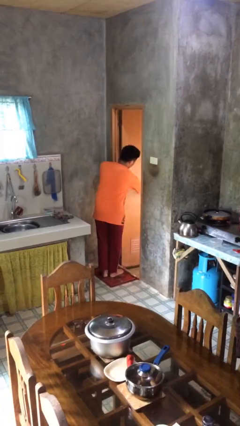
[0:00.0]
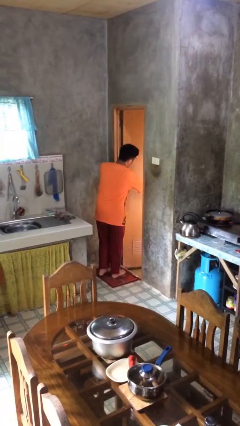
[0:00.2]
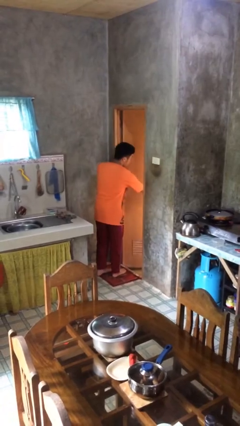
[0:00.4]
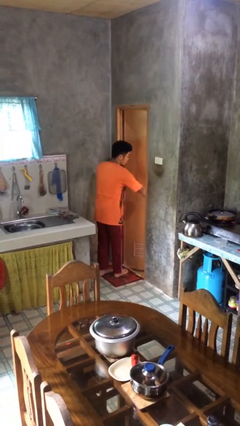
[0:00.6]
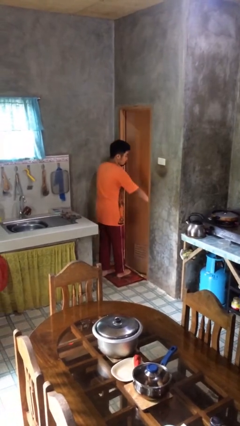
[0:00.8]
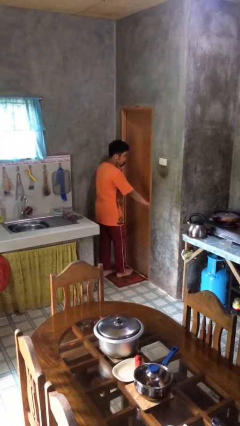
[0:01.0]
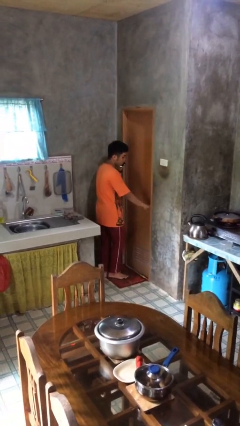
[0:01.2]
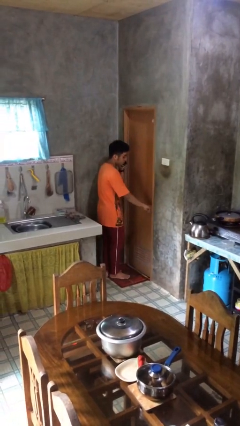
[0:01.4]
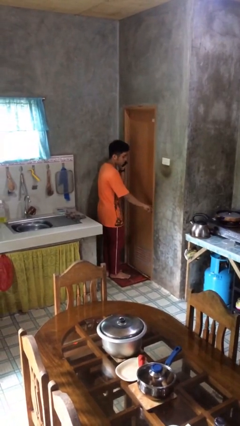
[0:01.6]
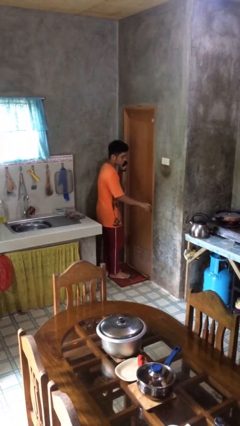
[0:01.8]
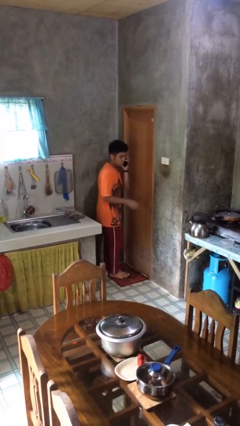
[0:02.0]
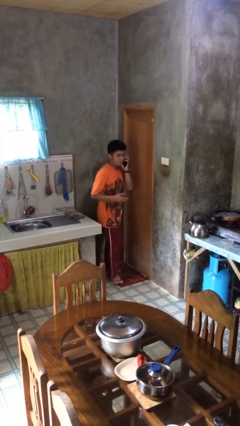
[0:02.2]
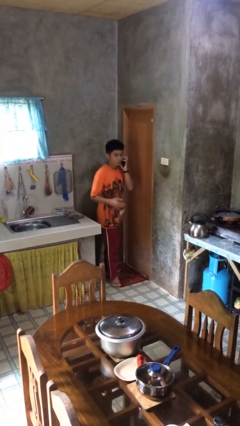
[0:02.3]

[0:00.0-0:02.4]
person closes facility door

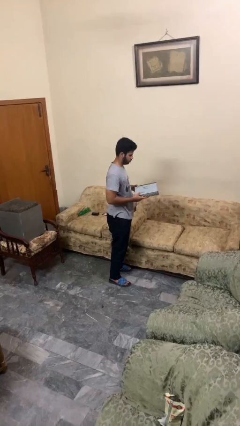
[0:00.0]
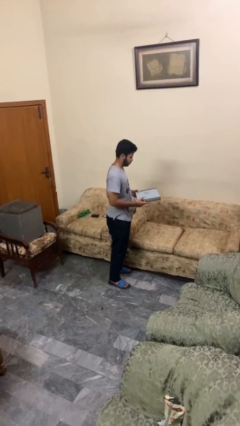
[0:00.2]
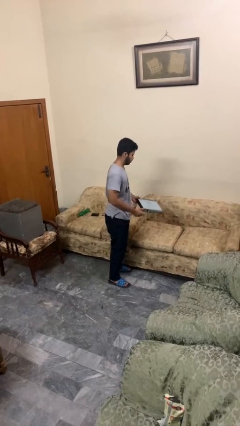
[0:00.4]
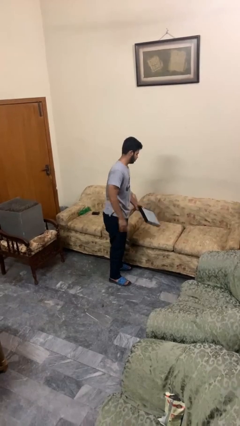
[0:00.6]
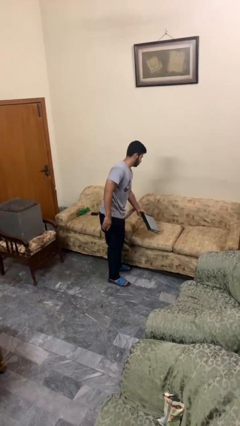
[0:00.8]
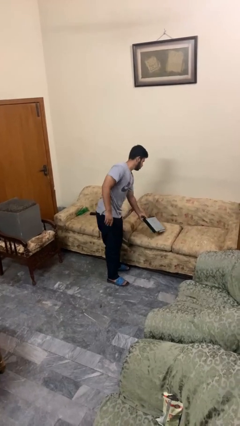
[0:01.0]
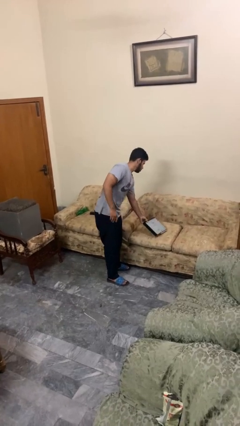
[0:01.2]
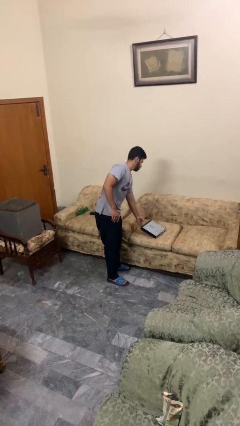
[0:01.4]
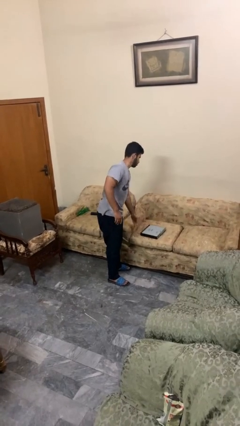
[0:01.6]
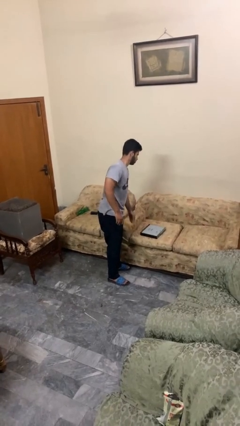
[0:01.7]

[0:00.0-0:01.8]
person puts down object on couch

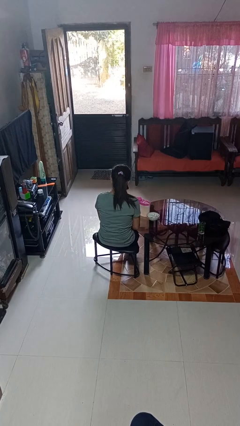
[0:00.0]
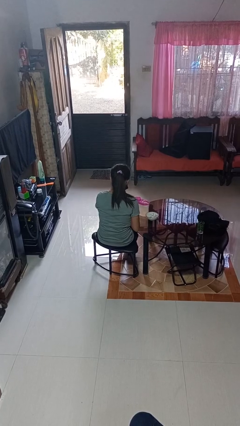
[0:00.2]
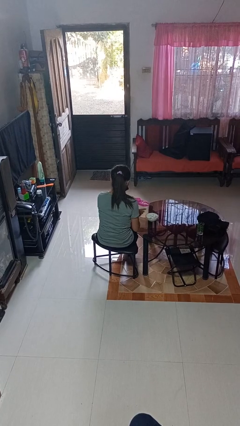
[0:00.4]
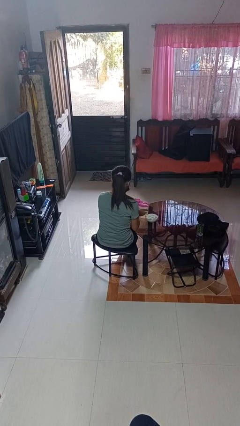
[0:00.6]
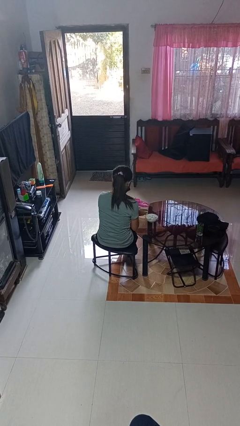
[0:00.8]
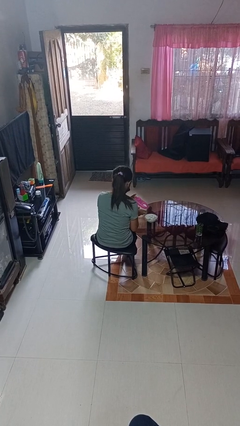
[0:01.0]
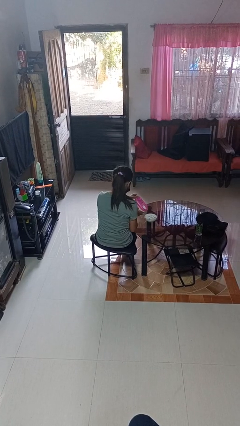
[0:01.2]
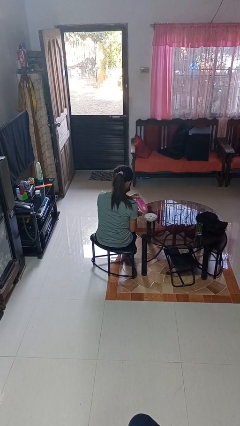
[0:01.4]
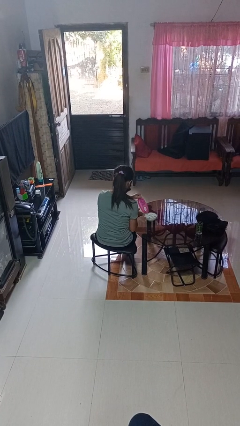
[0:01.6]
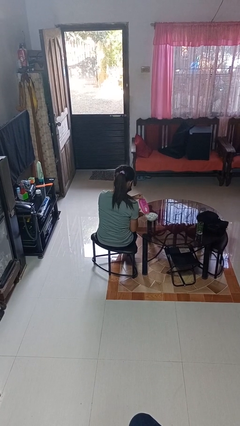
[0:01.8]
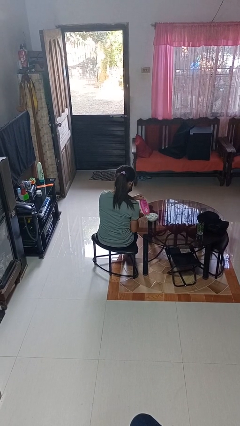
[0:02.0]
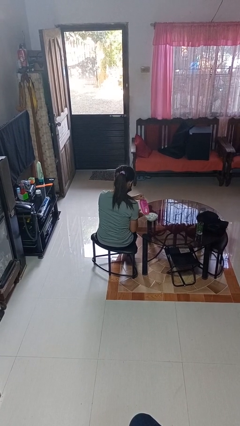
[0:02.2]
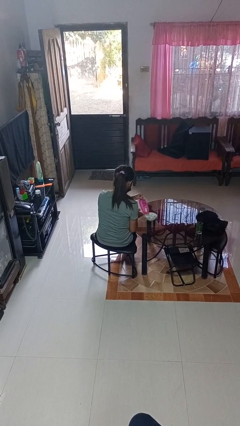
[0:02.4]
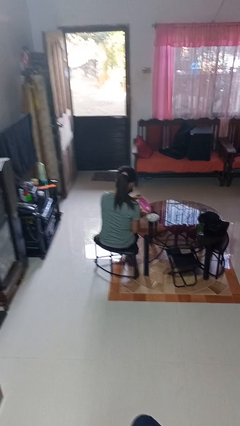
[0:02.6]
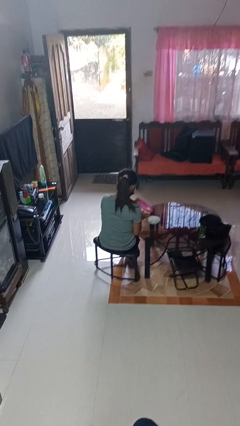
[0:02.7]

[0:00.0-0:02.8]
person pours into bowl

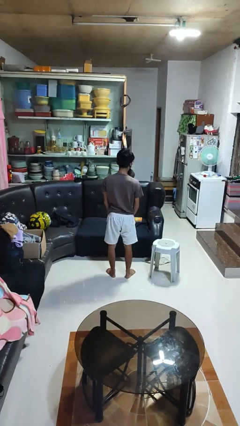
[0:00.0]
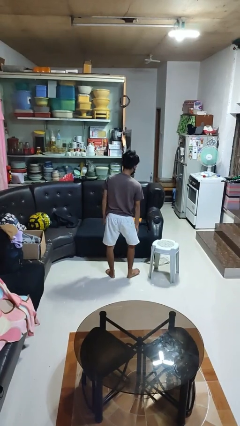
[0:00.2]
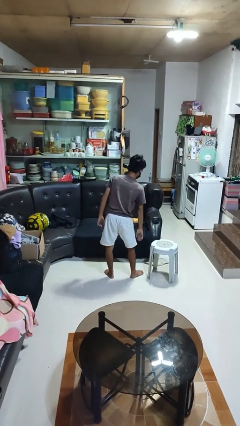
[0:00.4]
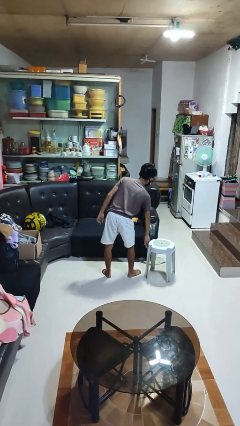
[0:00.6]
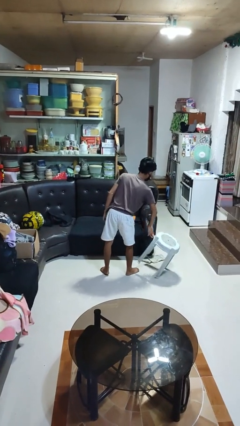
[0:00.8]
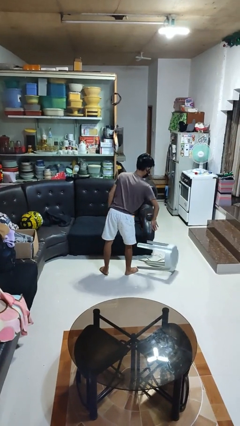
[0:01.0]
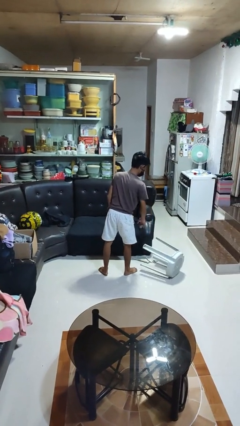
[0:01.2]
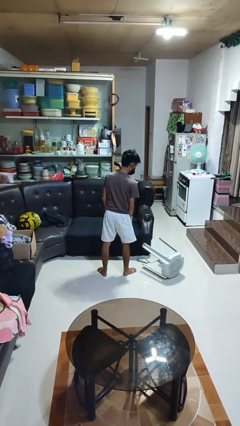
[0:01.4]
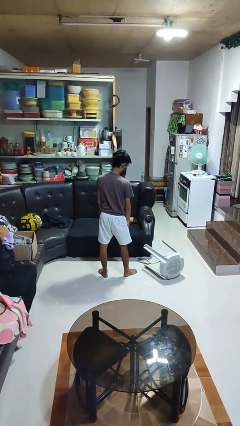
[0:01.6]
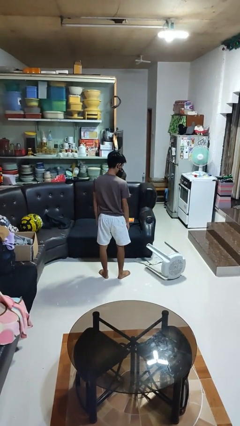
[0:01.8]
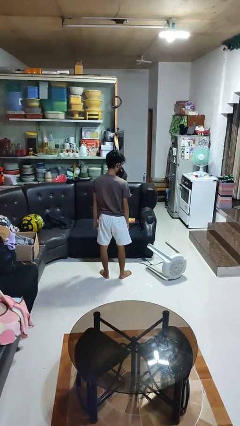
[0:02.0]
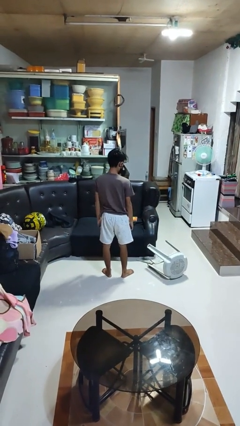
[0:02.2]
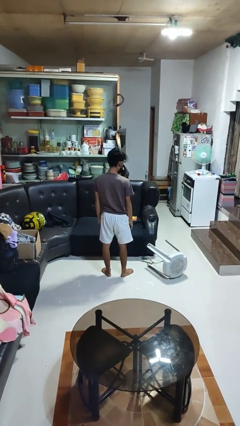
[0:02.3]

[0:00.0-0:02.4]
person knocks over furniture

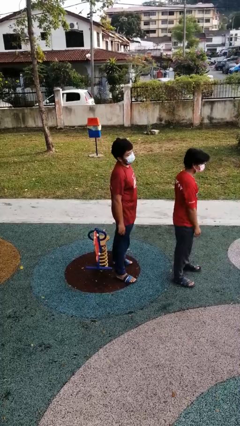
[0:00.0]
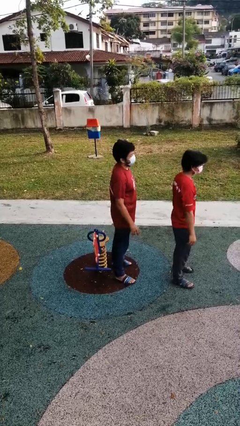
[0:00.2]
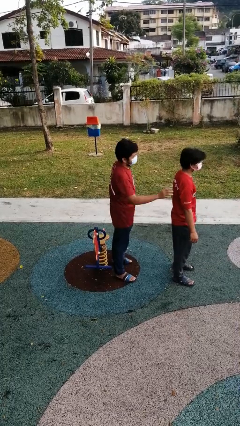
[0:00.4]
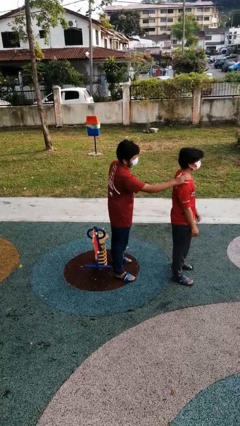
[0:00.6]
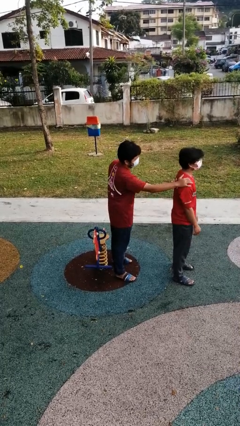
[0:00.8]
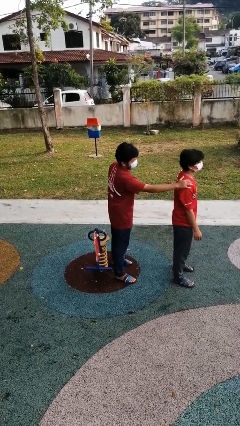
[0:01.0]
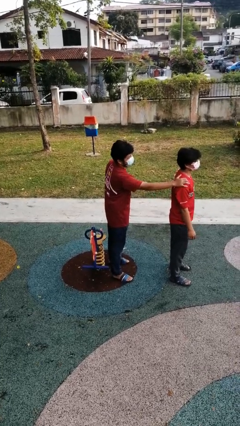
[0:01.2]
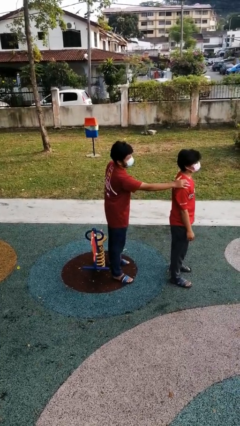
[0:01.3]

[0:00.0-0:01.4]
person grabs person by shoulder

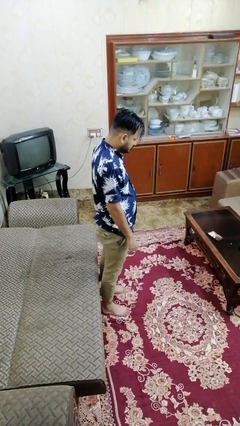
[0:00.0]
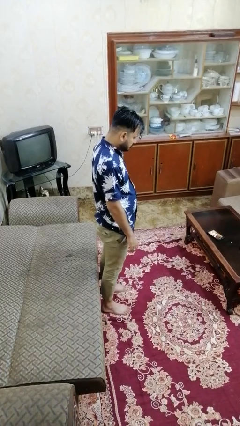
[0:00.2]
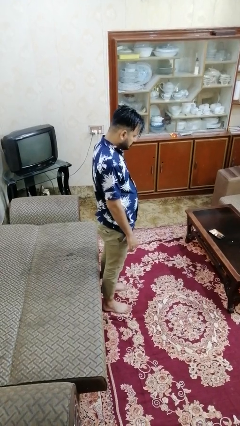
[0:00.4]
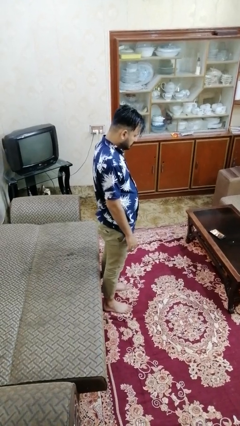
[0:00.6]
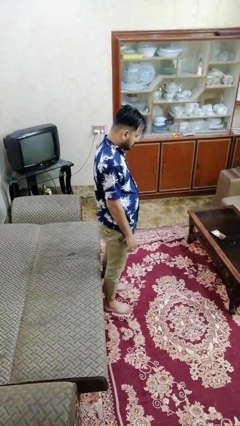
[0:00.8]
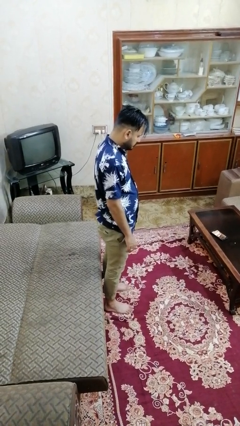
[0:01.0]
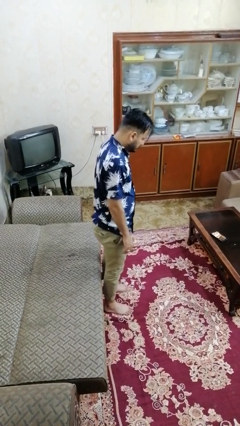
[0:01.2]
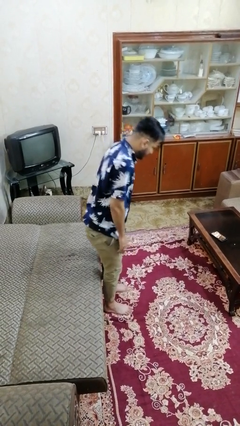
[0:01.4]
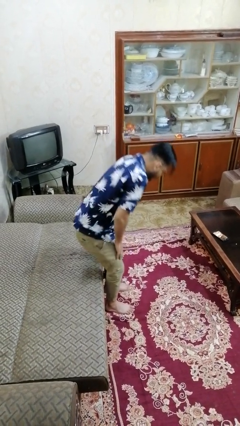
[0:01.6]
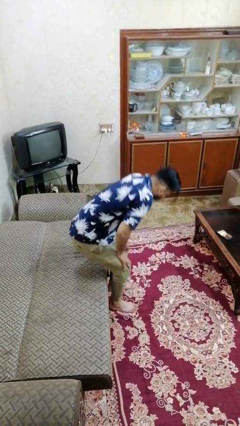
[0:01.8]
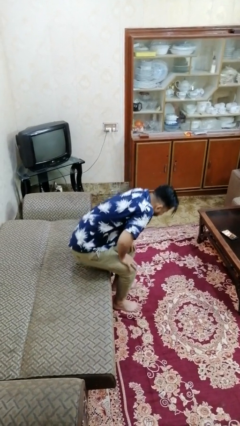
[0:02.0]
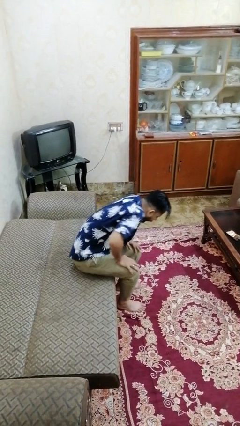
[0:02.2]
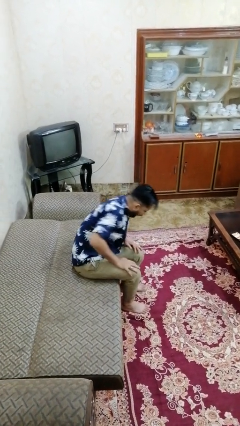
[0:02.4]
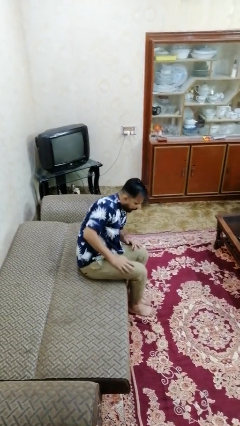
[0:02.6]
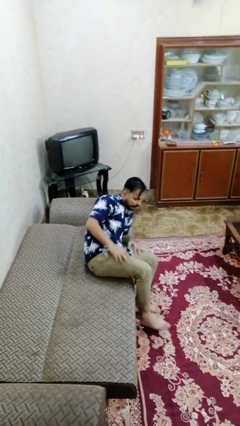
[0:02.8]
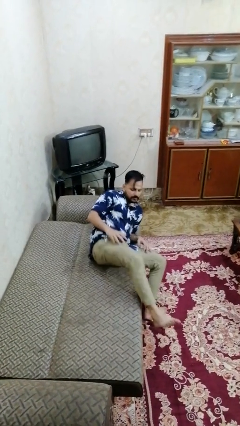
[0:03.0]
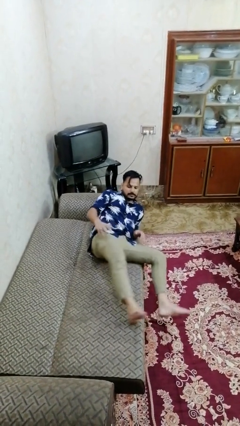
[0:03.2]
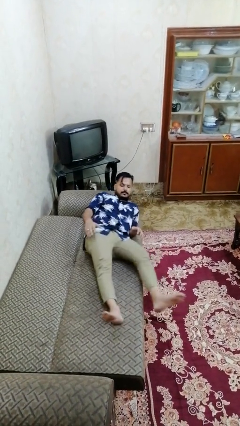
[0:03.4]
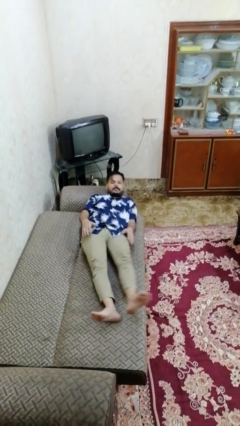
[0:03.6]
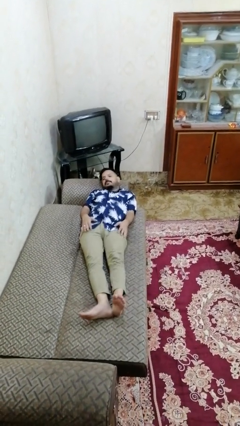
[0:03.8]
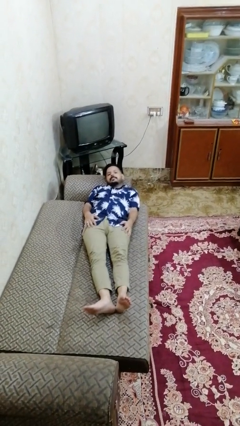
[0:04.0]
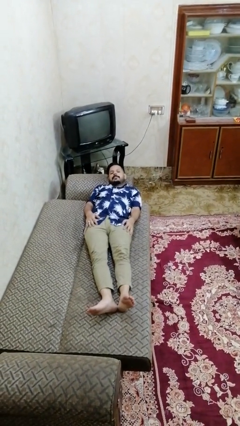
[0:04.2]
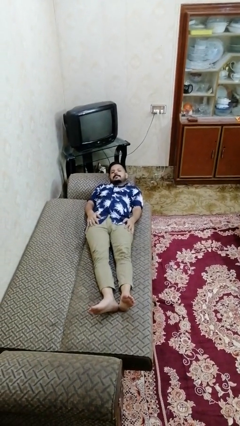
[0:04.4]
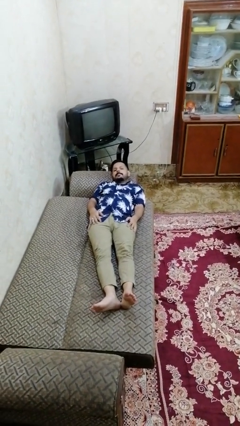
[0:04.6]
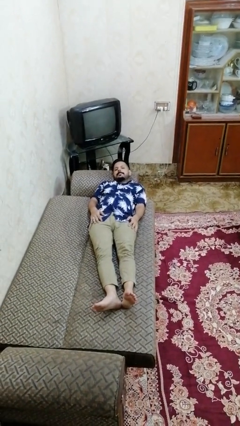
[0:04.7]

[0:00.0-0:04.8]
person lies down on bed

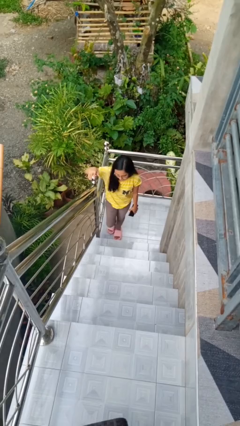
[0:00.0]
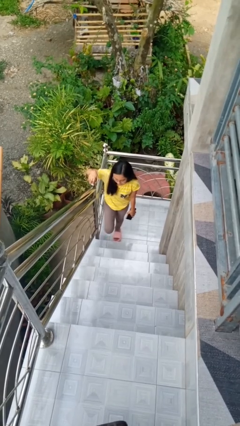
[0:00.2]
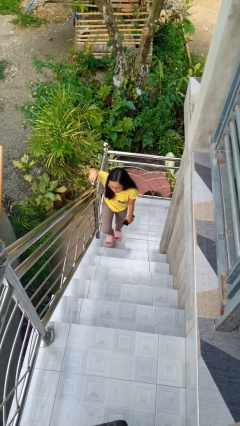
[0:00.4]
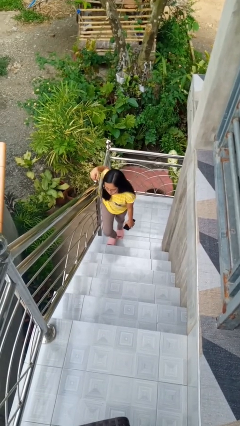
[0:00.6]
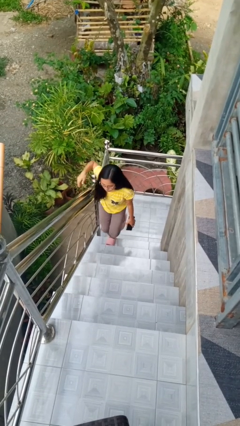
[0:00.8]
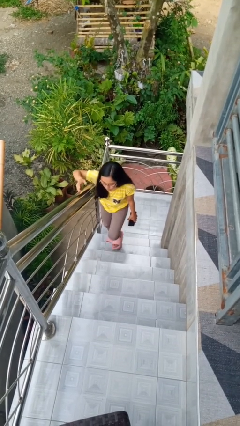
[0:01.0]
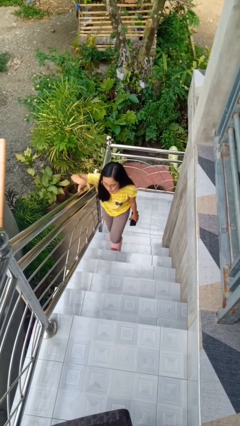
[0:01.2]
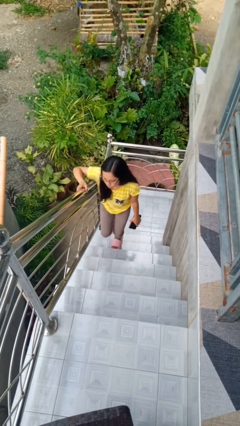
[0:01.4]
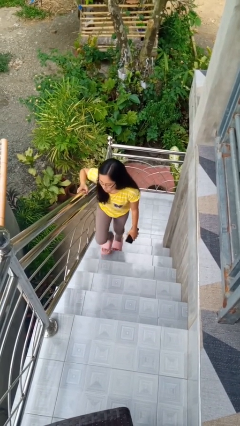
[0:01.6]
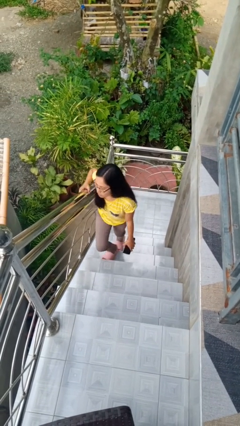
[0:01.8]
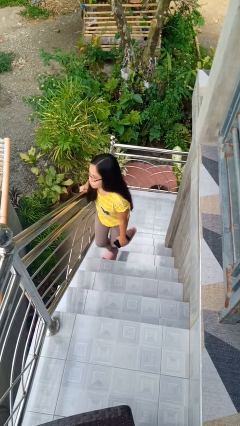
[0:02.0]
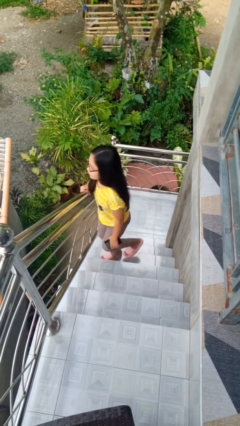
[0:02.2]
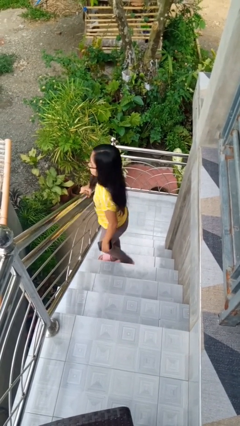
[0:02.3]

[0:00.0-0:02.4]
person climbs up stairs
